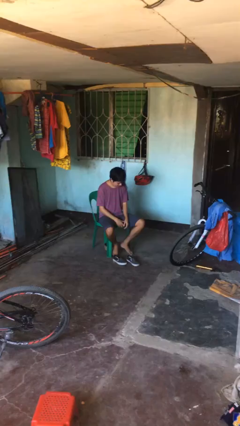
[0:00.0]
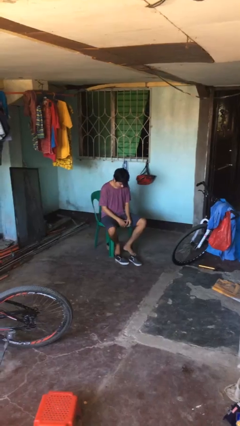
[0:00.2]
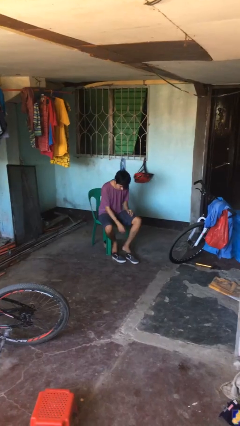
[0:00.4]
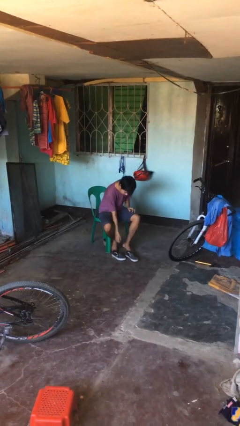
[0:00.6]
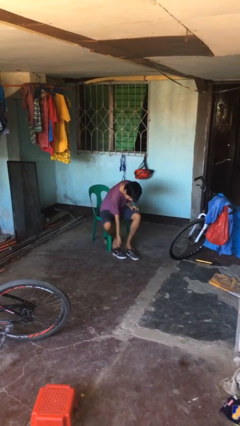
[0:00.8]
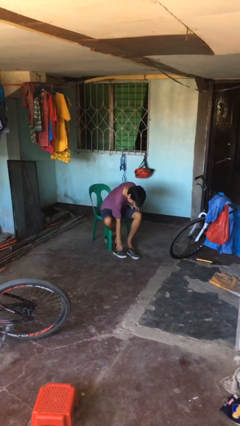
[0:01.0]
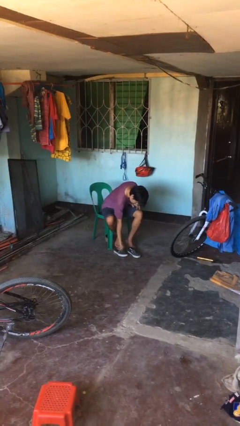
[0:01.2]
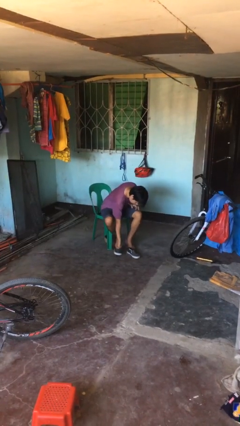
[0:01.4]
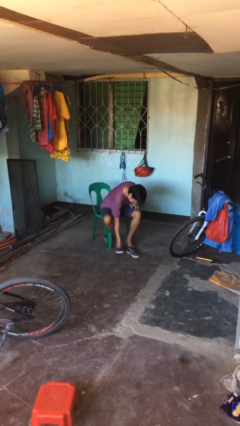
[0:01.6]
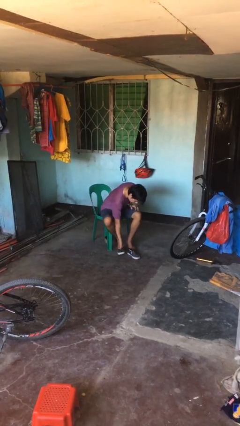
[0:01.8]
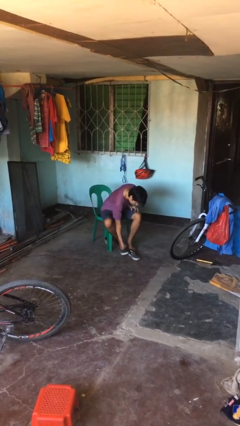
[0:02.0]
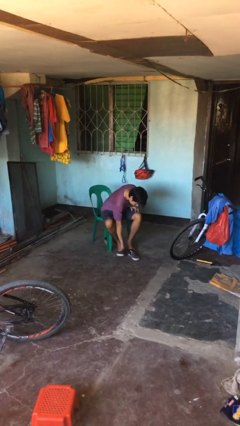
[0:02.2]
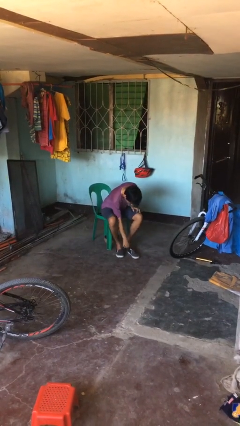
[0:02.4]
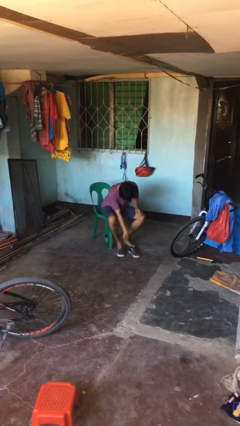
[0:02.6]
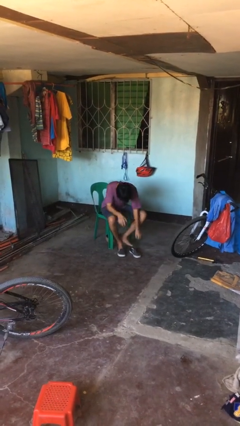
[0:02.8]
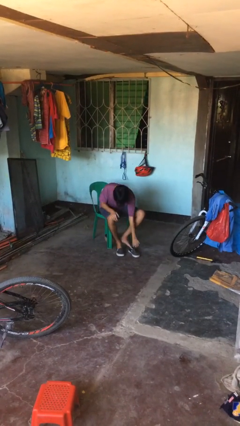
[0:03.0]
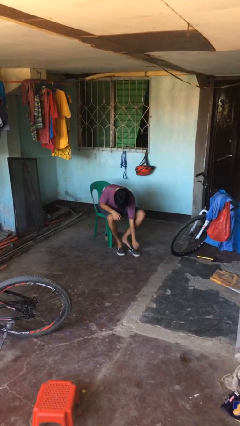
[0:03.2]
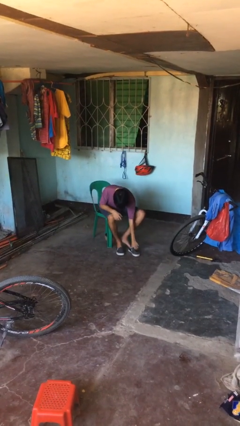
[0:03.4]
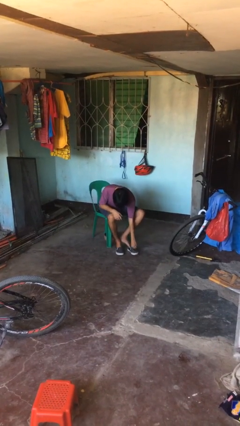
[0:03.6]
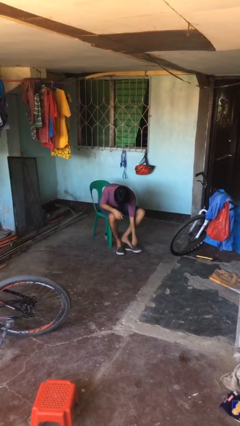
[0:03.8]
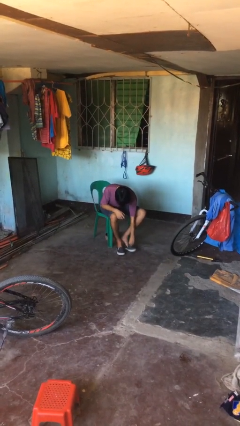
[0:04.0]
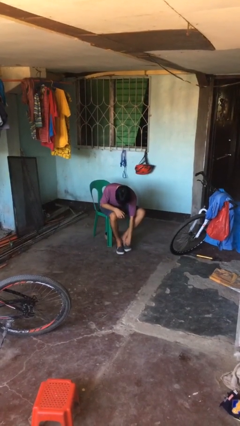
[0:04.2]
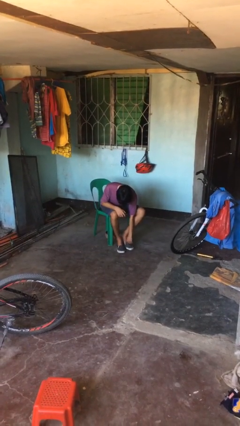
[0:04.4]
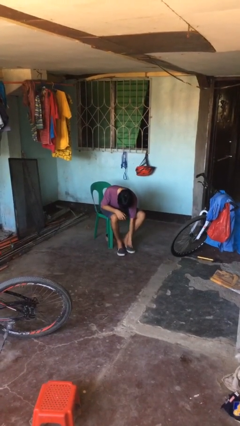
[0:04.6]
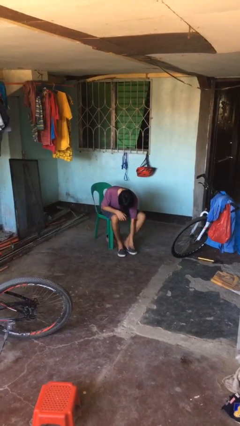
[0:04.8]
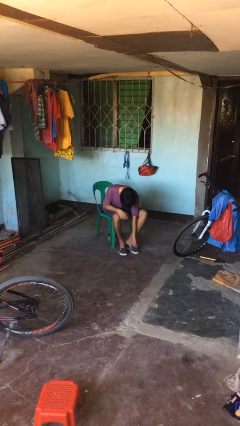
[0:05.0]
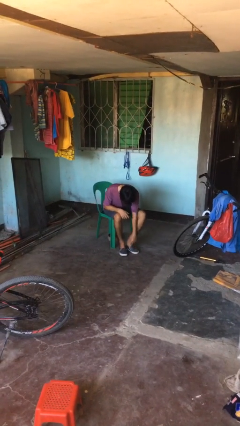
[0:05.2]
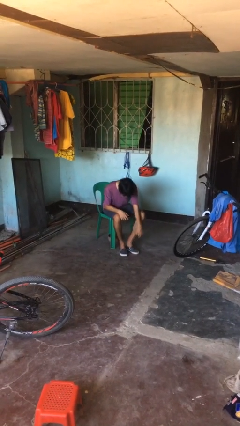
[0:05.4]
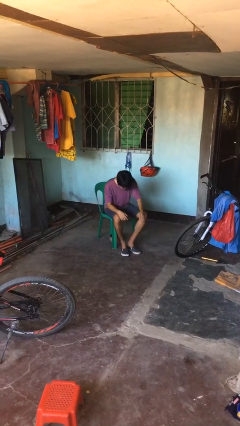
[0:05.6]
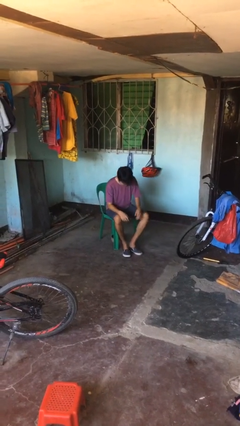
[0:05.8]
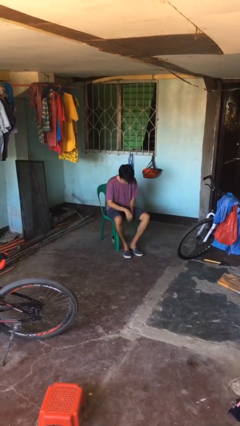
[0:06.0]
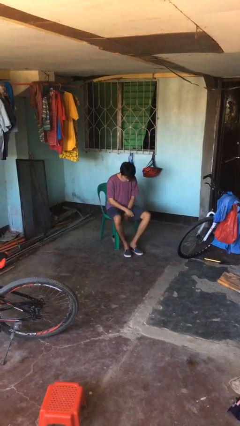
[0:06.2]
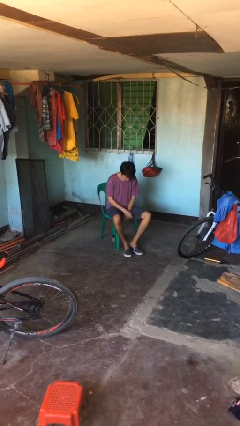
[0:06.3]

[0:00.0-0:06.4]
person puts on shoes

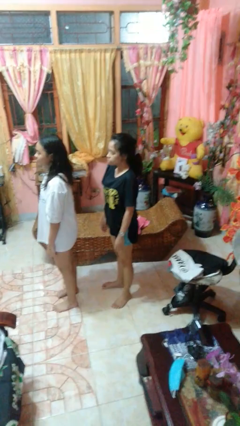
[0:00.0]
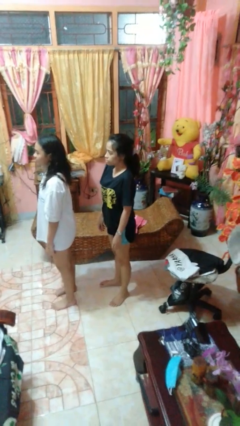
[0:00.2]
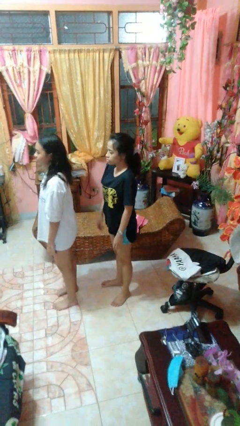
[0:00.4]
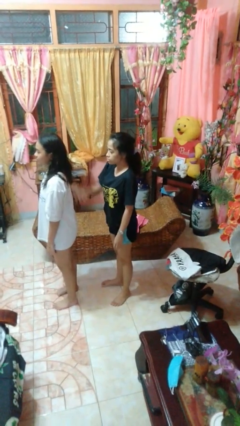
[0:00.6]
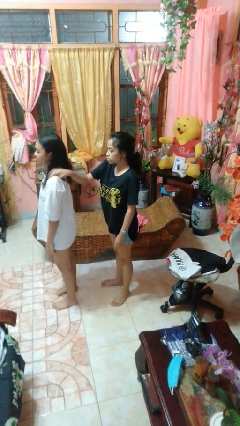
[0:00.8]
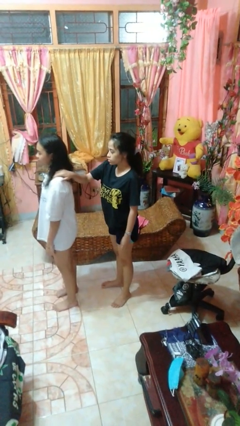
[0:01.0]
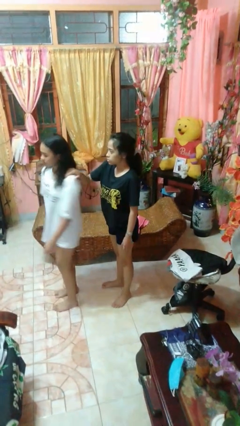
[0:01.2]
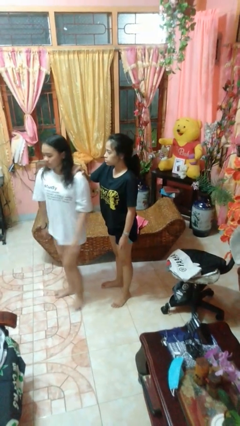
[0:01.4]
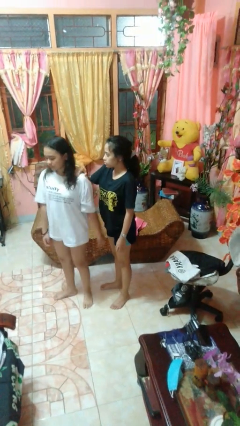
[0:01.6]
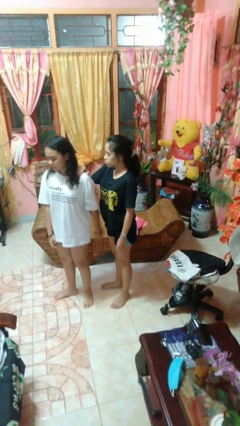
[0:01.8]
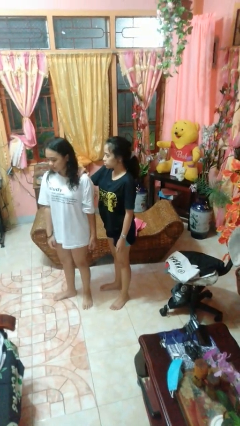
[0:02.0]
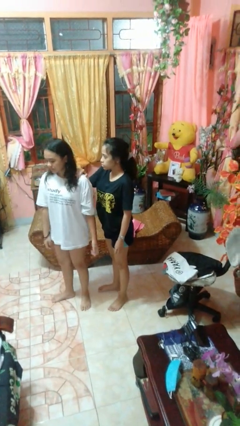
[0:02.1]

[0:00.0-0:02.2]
person grabs person by shoulder

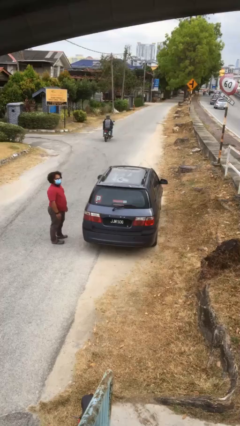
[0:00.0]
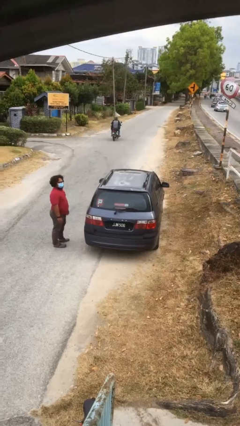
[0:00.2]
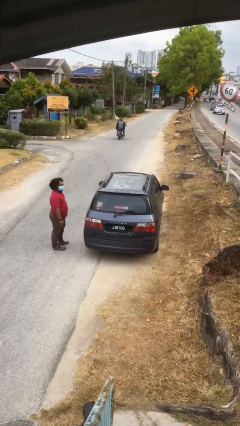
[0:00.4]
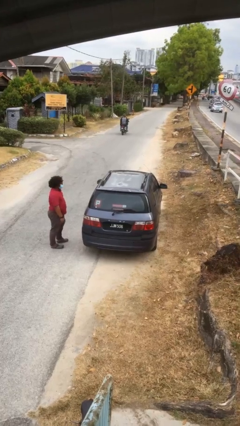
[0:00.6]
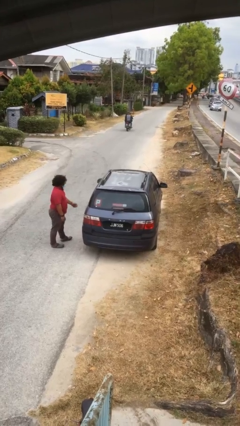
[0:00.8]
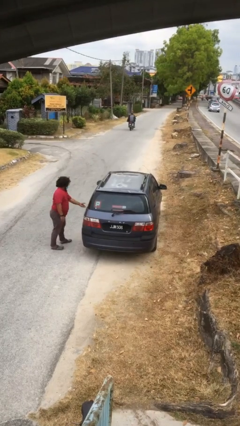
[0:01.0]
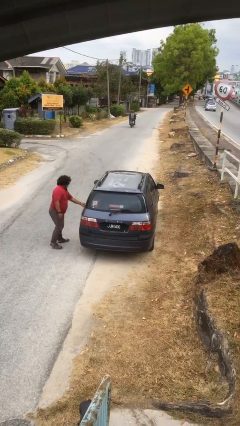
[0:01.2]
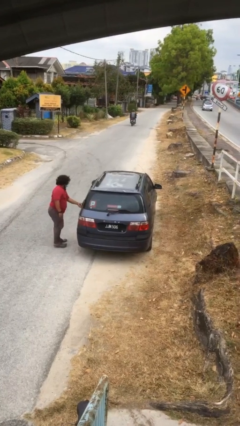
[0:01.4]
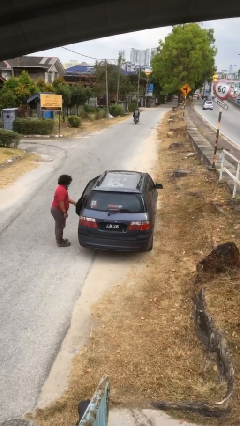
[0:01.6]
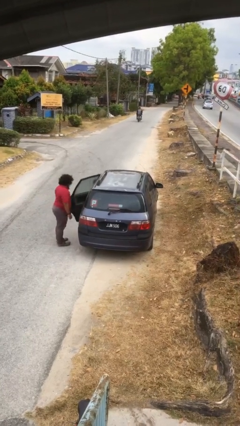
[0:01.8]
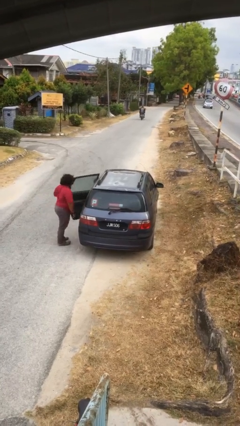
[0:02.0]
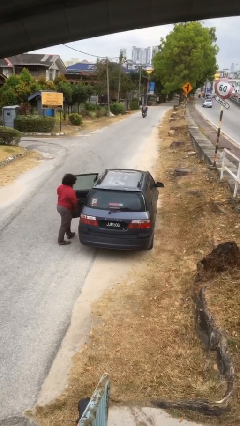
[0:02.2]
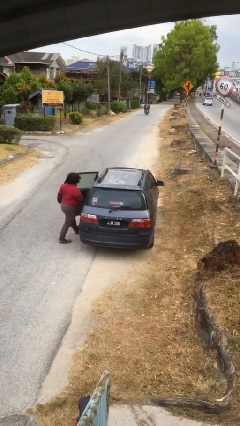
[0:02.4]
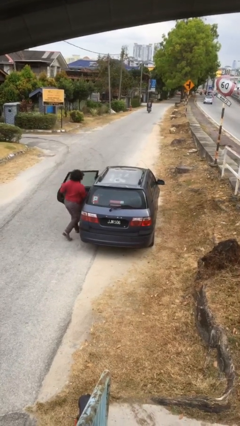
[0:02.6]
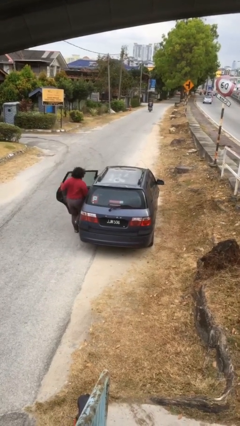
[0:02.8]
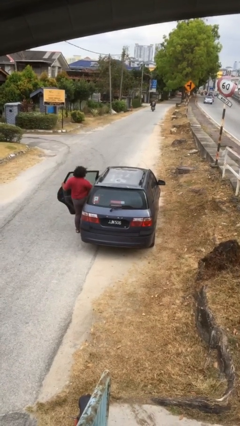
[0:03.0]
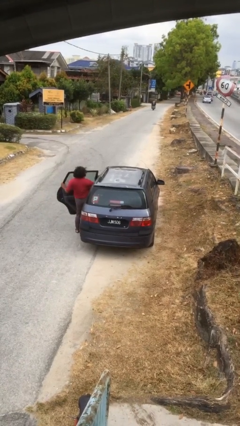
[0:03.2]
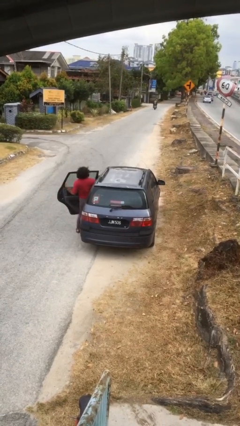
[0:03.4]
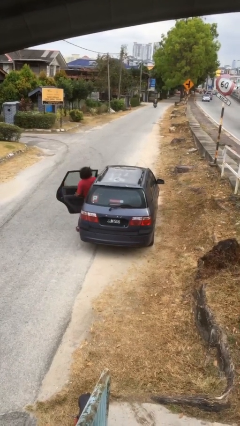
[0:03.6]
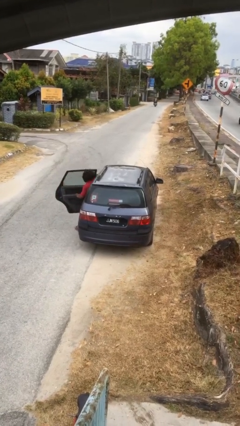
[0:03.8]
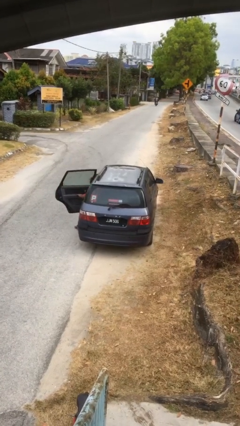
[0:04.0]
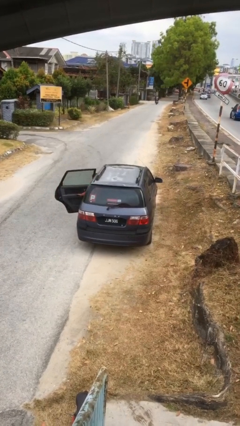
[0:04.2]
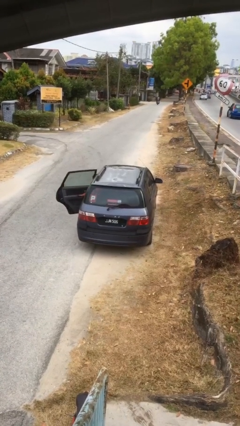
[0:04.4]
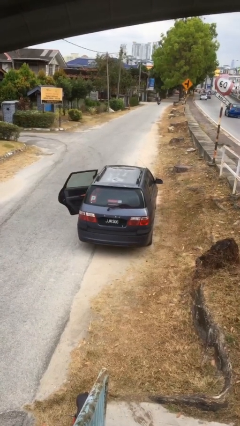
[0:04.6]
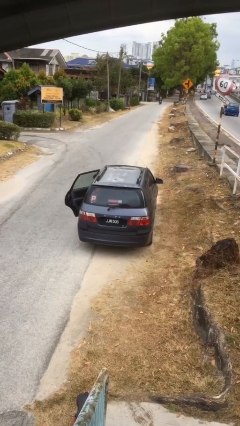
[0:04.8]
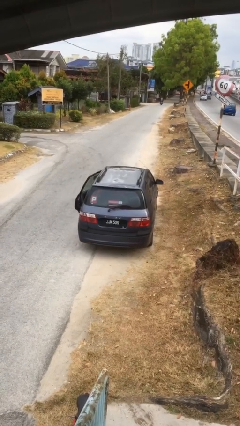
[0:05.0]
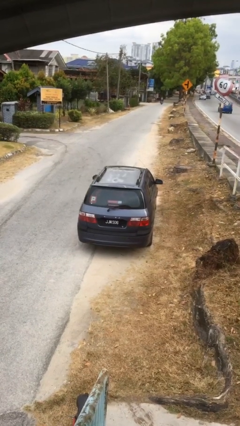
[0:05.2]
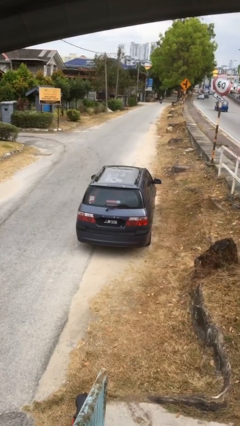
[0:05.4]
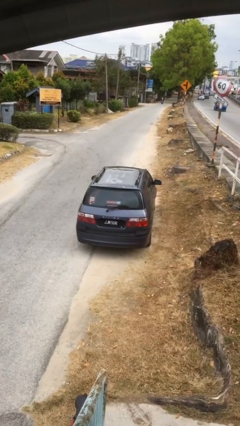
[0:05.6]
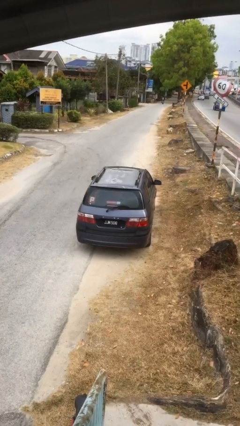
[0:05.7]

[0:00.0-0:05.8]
car picks up person

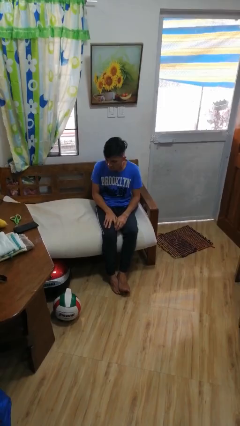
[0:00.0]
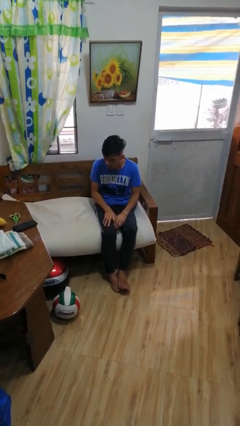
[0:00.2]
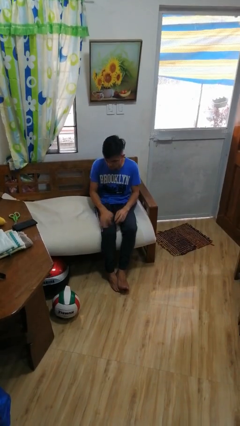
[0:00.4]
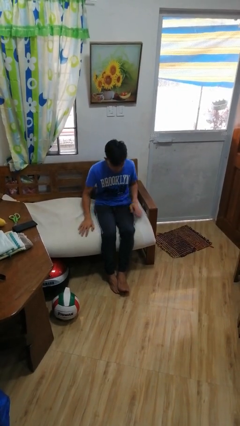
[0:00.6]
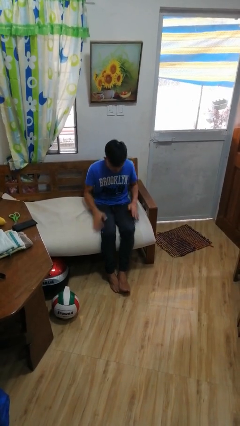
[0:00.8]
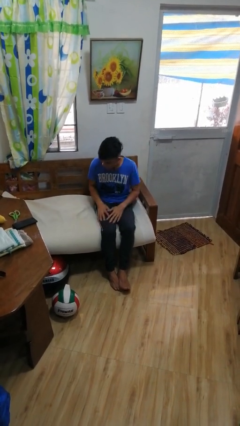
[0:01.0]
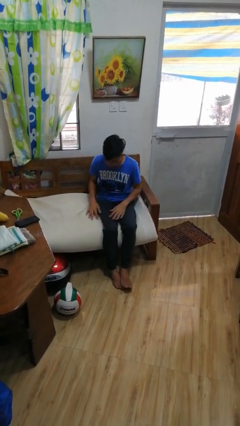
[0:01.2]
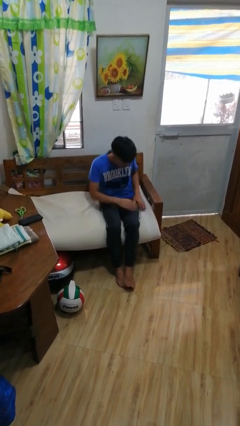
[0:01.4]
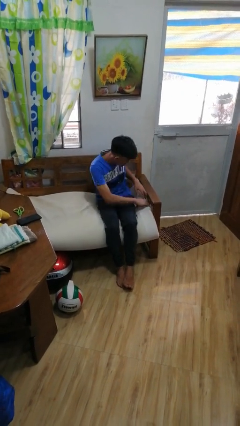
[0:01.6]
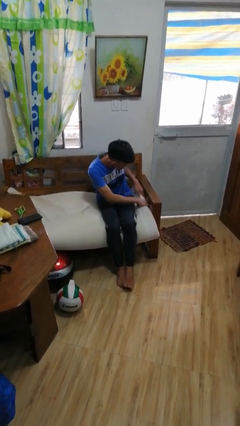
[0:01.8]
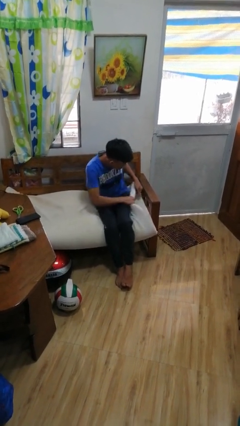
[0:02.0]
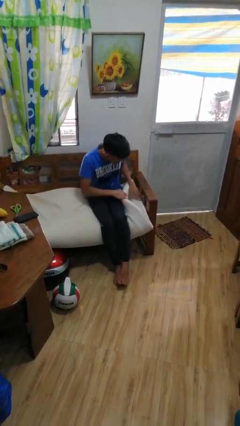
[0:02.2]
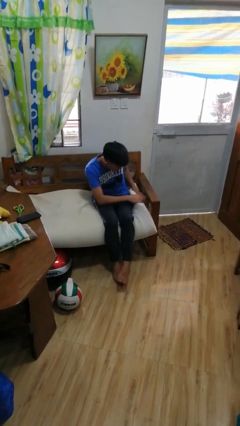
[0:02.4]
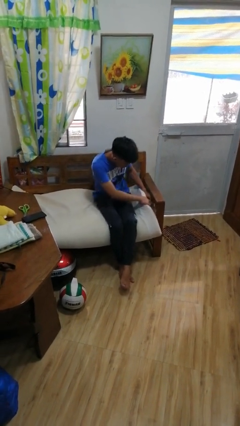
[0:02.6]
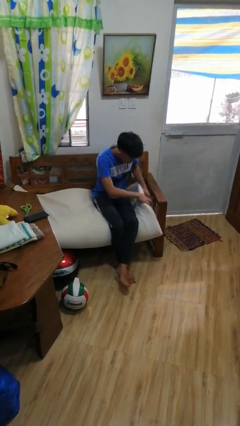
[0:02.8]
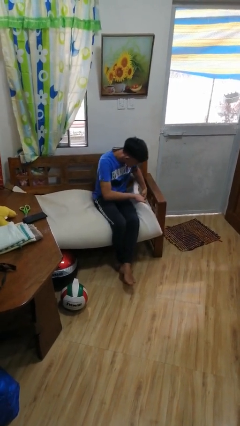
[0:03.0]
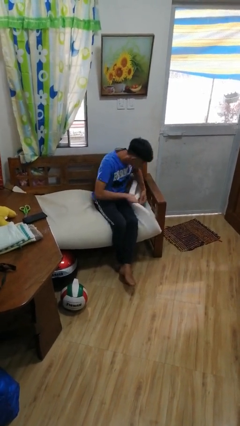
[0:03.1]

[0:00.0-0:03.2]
person searches in couch

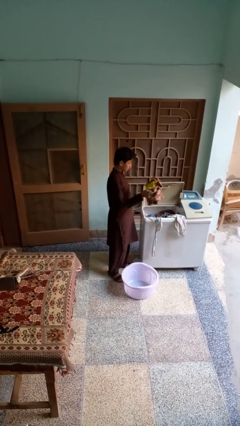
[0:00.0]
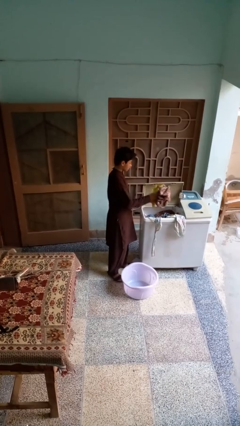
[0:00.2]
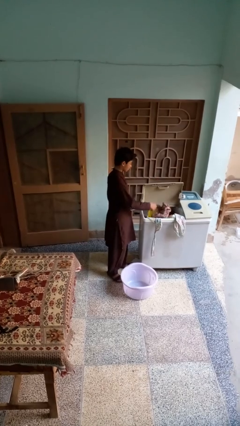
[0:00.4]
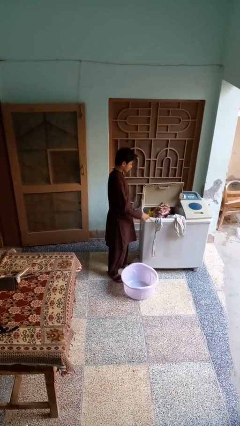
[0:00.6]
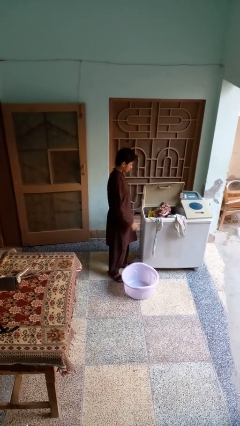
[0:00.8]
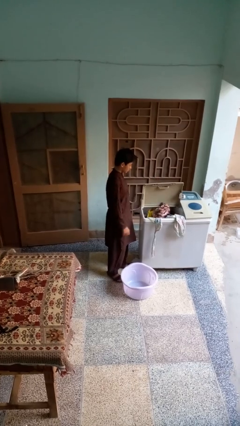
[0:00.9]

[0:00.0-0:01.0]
person unloads clotheswasher
